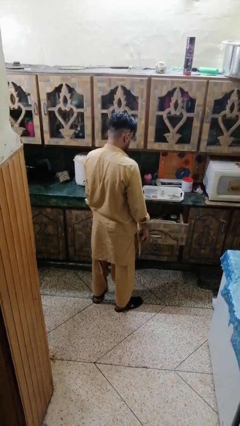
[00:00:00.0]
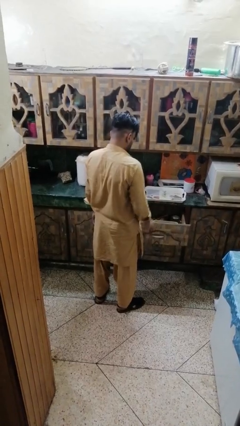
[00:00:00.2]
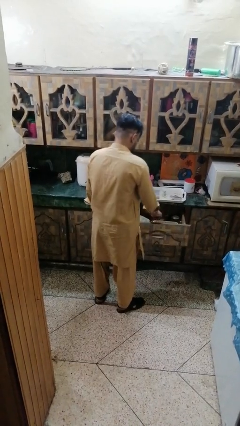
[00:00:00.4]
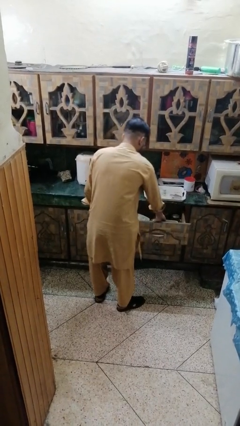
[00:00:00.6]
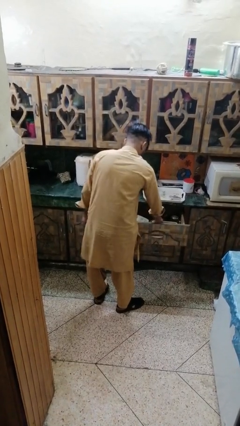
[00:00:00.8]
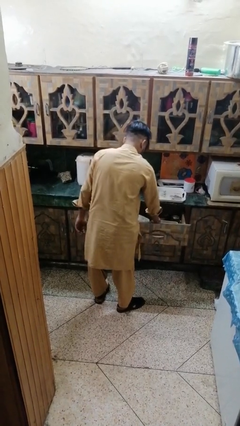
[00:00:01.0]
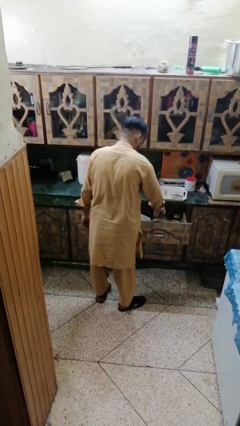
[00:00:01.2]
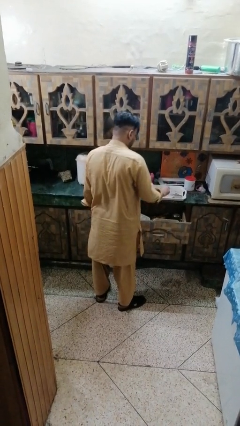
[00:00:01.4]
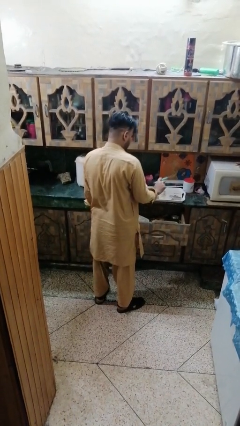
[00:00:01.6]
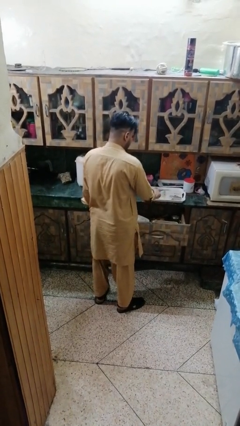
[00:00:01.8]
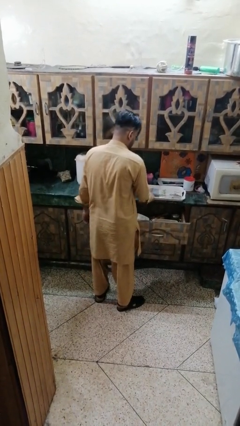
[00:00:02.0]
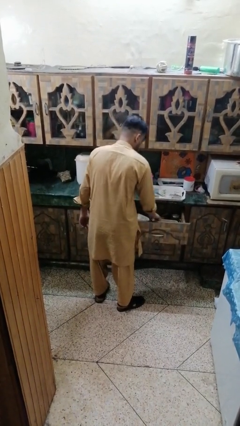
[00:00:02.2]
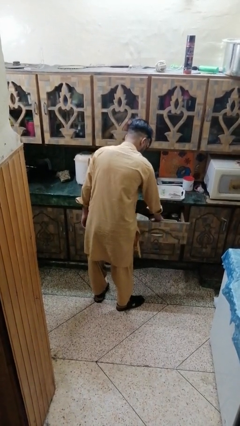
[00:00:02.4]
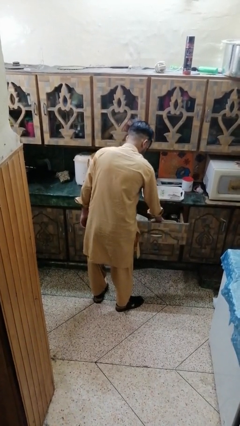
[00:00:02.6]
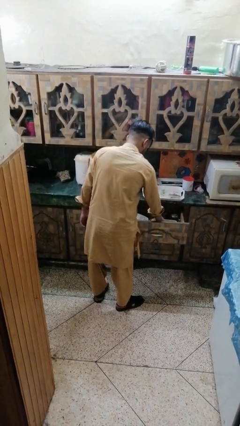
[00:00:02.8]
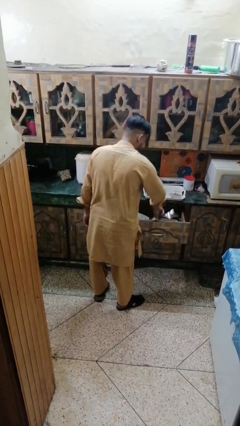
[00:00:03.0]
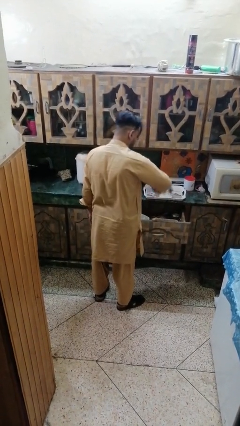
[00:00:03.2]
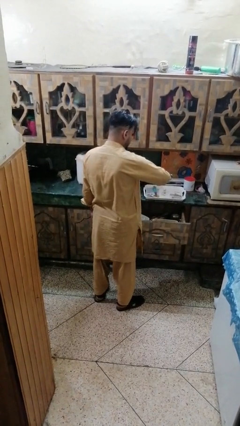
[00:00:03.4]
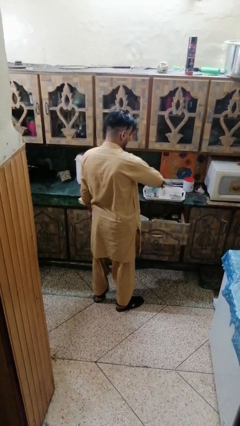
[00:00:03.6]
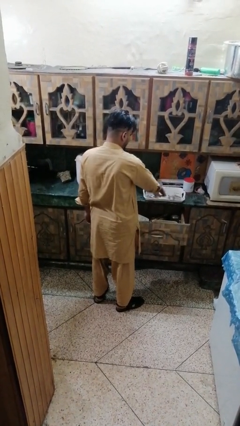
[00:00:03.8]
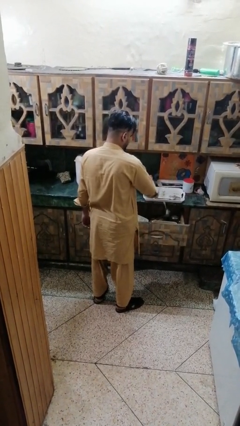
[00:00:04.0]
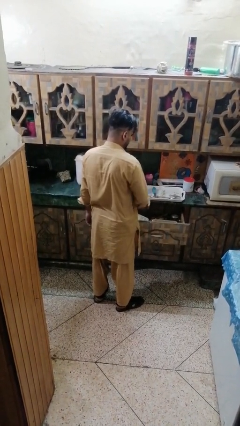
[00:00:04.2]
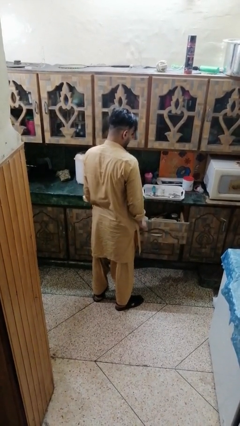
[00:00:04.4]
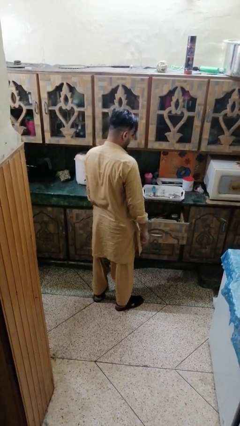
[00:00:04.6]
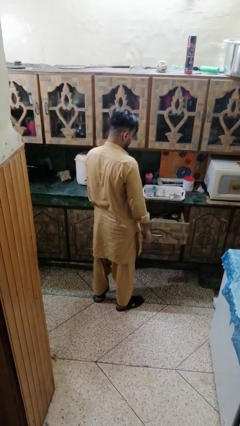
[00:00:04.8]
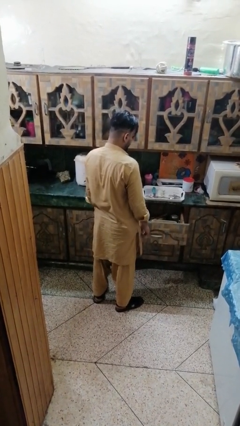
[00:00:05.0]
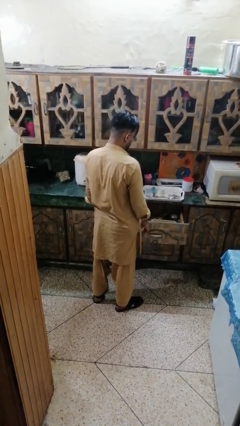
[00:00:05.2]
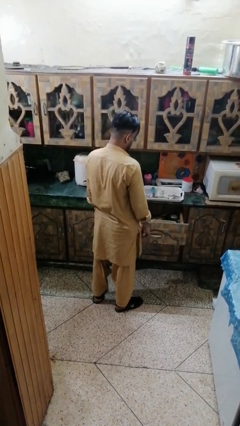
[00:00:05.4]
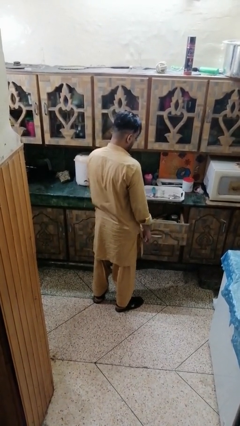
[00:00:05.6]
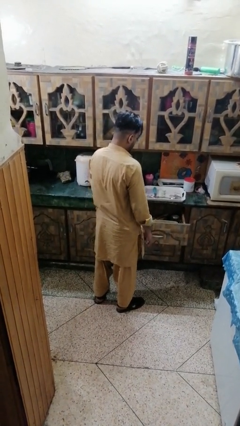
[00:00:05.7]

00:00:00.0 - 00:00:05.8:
person takes object from kitchen drawer

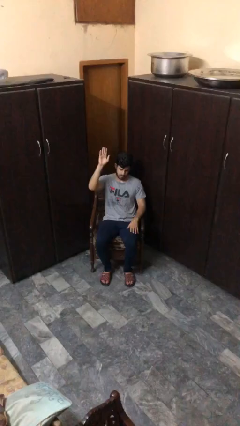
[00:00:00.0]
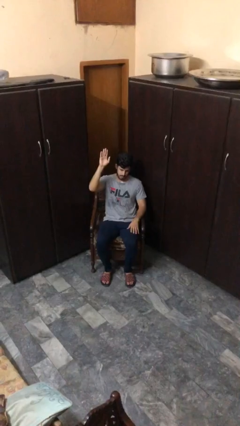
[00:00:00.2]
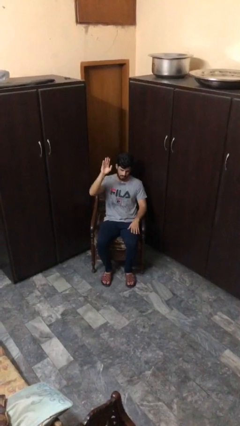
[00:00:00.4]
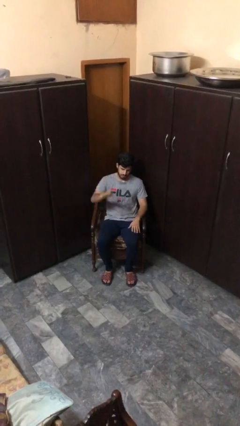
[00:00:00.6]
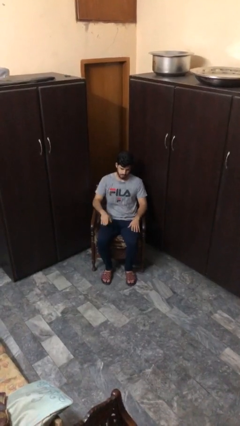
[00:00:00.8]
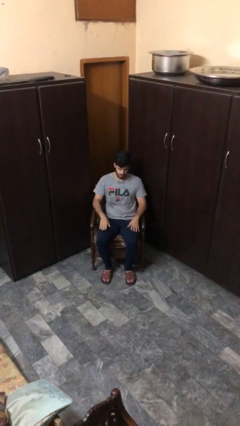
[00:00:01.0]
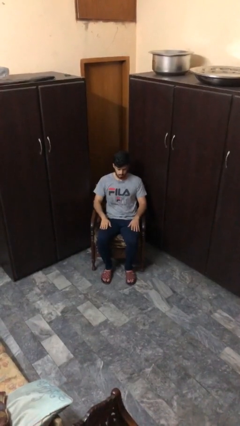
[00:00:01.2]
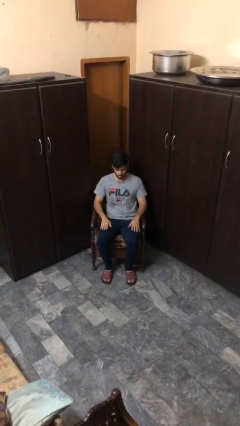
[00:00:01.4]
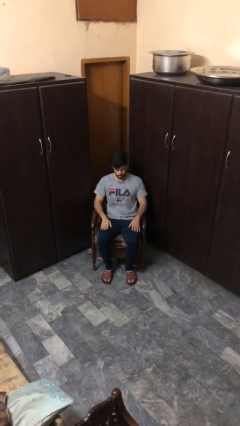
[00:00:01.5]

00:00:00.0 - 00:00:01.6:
person gestures lower hand

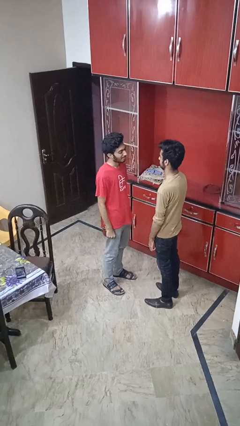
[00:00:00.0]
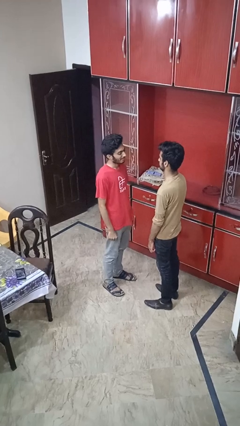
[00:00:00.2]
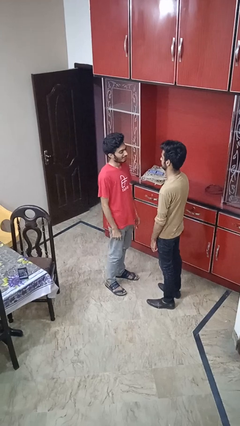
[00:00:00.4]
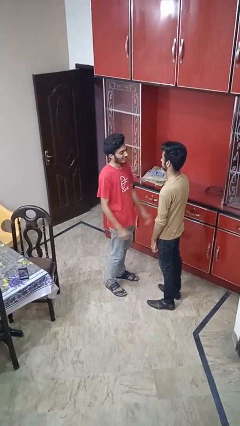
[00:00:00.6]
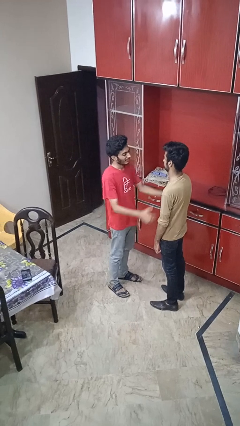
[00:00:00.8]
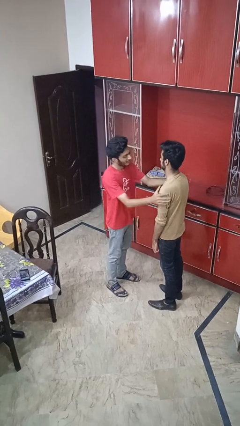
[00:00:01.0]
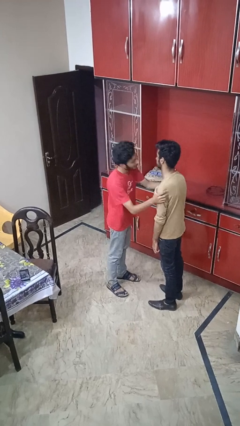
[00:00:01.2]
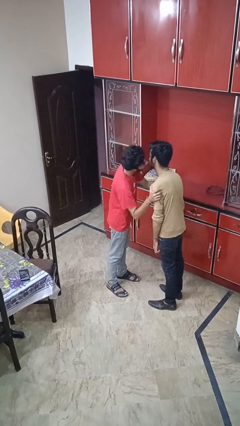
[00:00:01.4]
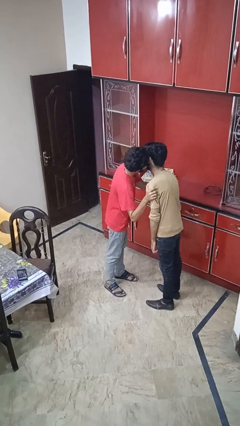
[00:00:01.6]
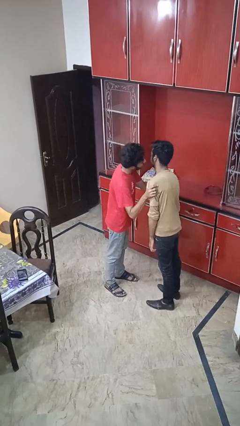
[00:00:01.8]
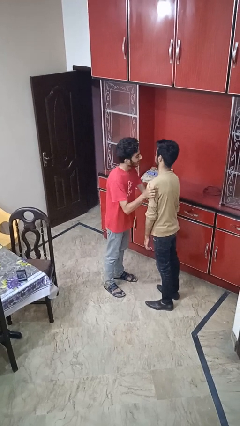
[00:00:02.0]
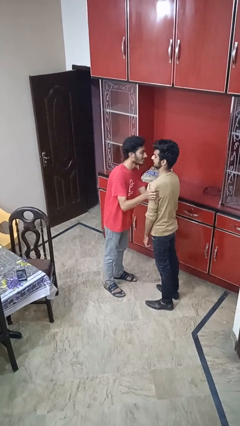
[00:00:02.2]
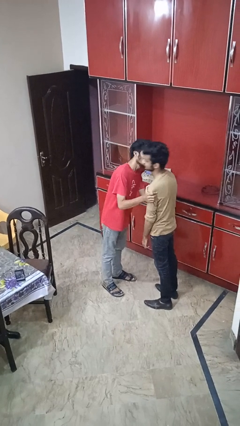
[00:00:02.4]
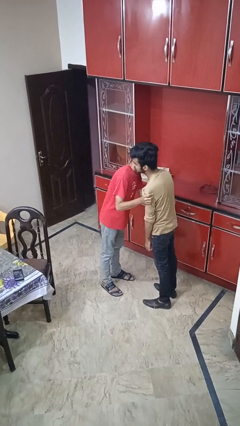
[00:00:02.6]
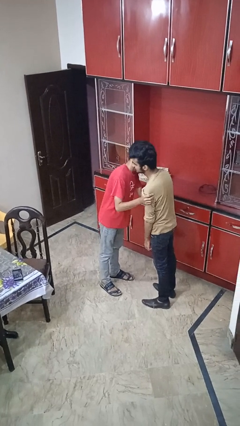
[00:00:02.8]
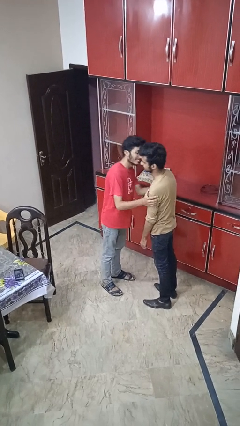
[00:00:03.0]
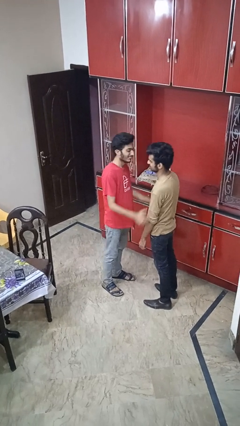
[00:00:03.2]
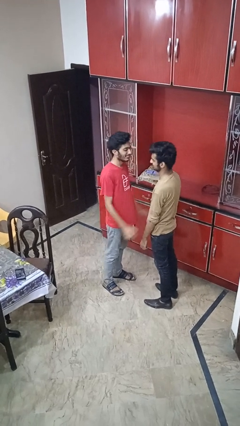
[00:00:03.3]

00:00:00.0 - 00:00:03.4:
person kisses cheek of person

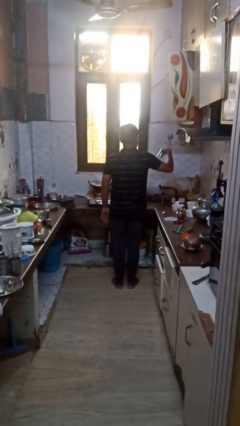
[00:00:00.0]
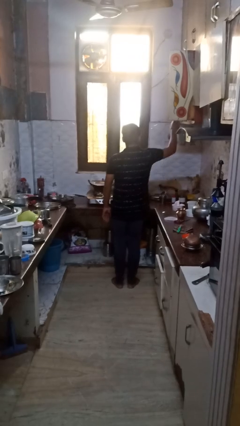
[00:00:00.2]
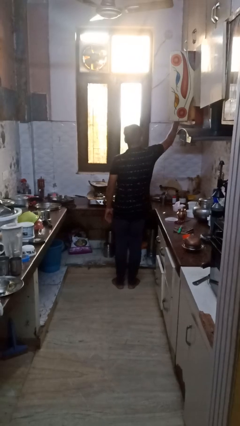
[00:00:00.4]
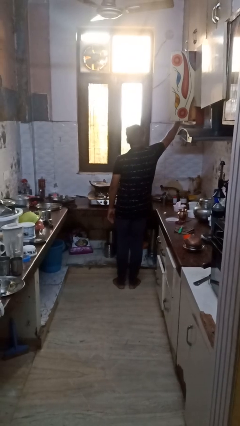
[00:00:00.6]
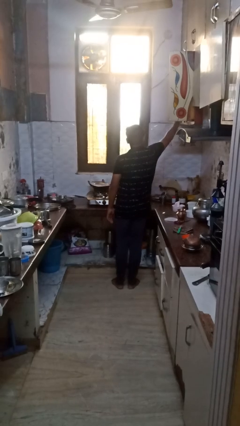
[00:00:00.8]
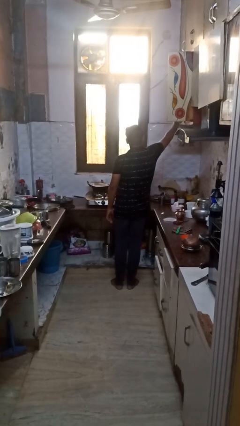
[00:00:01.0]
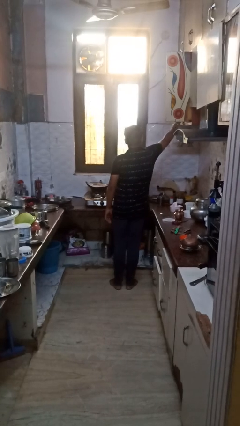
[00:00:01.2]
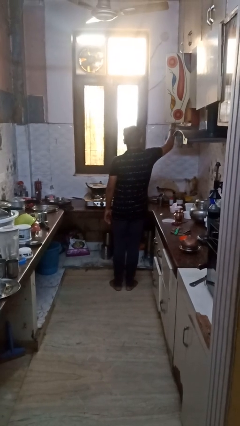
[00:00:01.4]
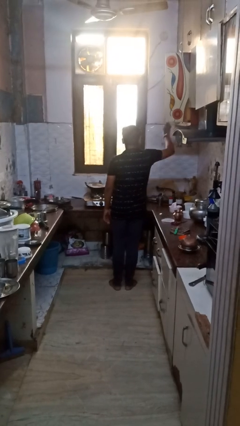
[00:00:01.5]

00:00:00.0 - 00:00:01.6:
person takes object from cabinet

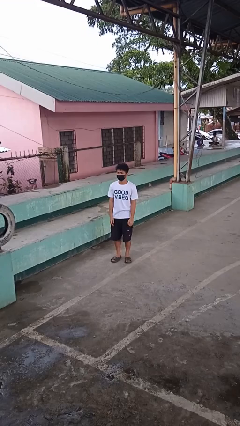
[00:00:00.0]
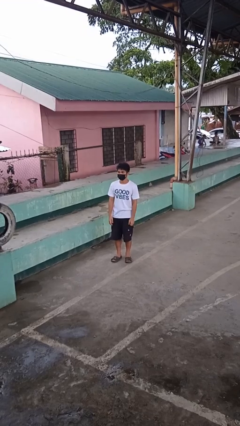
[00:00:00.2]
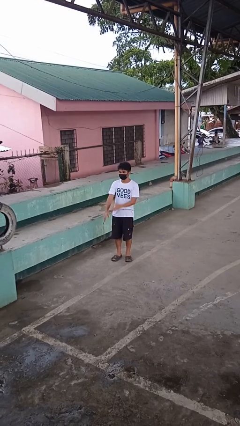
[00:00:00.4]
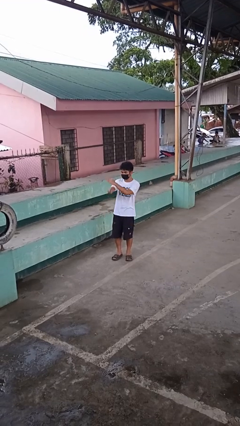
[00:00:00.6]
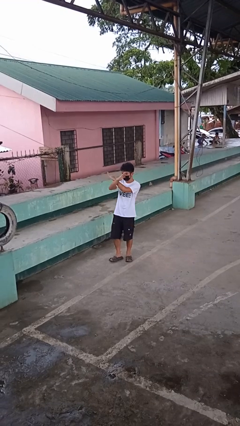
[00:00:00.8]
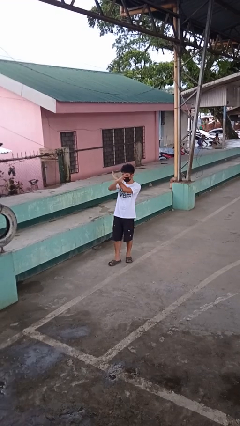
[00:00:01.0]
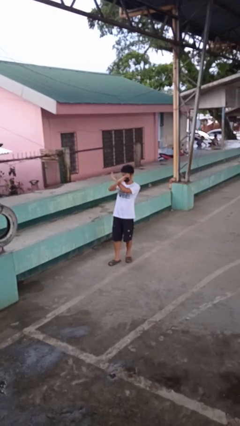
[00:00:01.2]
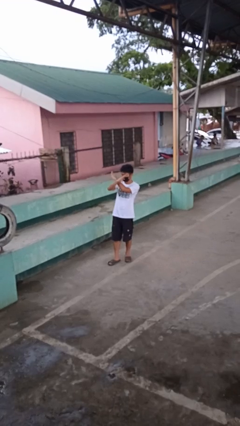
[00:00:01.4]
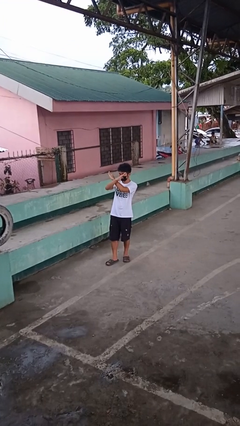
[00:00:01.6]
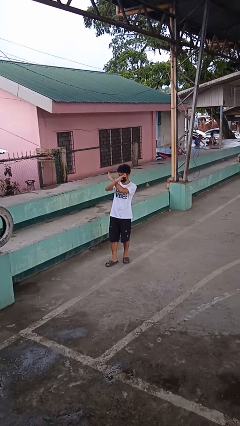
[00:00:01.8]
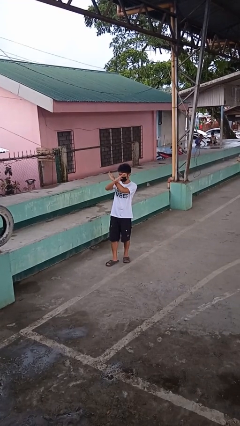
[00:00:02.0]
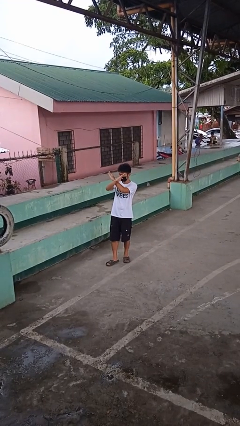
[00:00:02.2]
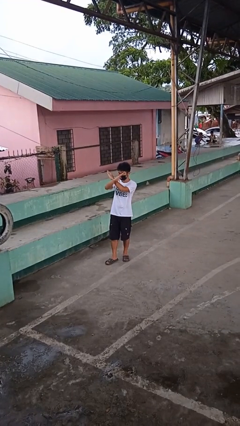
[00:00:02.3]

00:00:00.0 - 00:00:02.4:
person gestures arms x

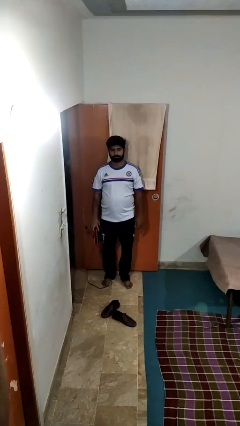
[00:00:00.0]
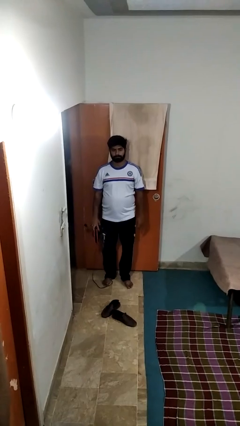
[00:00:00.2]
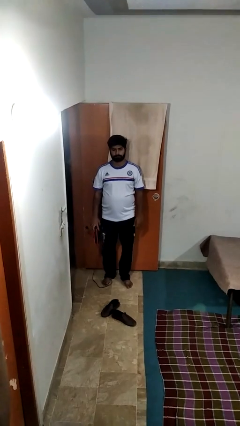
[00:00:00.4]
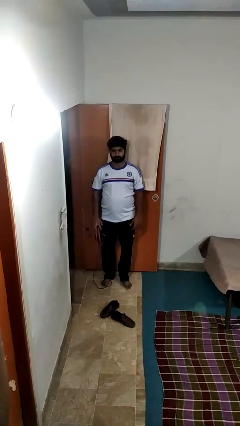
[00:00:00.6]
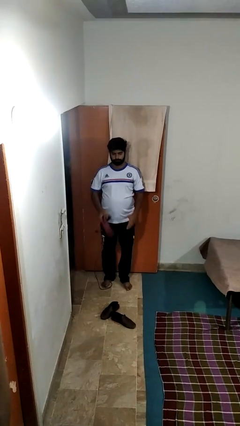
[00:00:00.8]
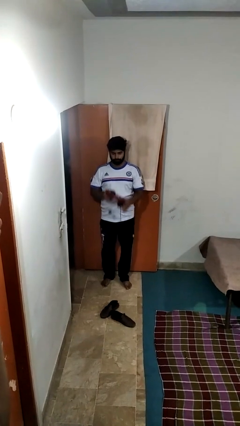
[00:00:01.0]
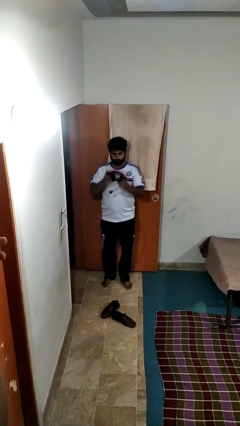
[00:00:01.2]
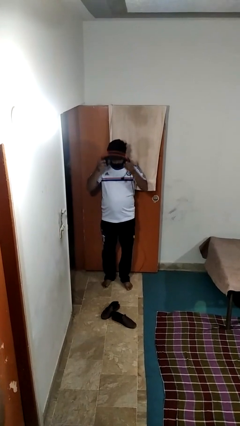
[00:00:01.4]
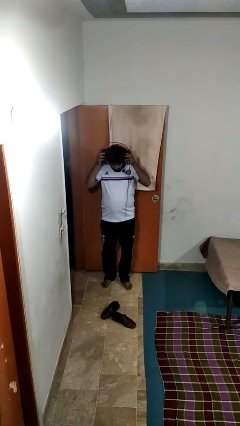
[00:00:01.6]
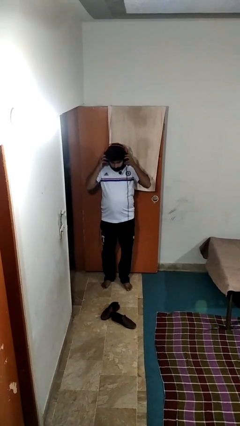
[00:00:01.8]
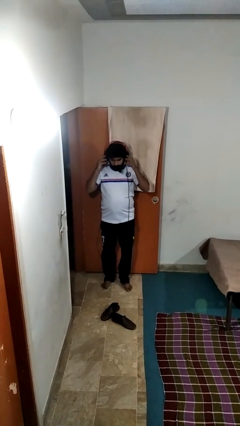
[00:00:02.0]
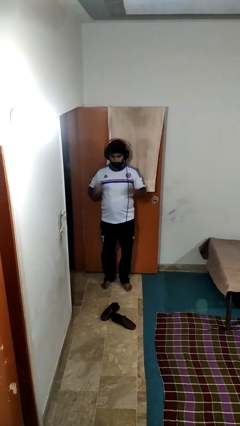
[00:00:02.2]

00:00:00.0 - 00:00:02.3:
person puts on headphones

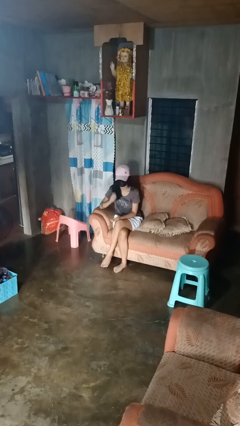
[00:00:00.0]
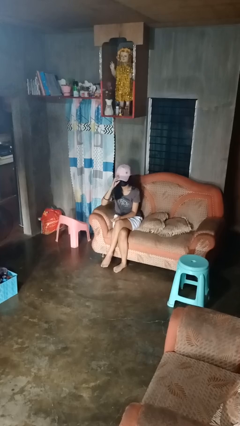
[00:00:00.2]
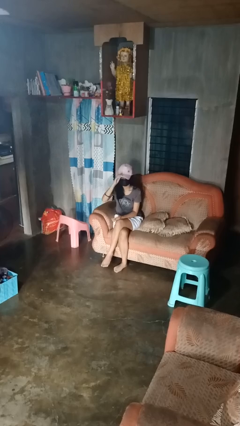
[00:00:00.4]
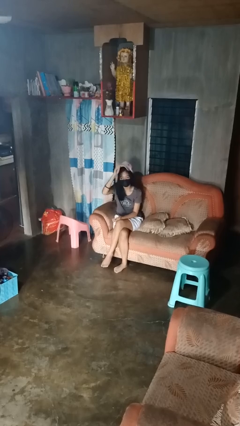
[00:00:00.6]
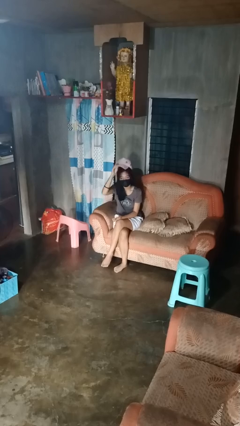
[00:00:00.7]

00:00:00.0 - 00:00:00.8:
person takes off hat
